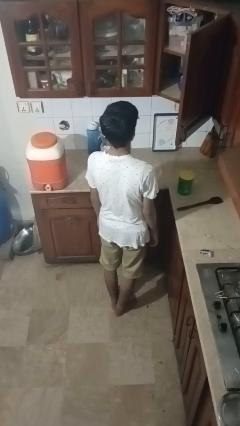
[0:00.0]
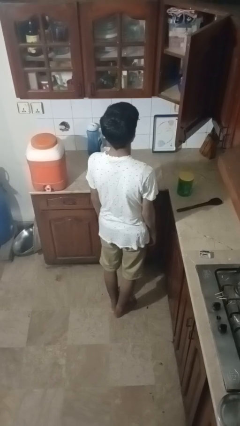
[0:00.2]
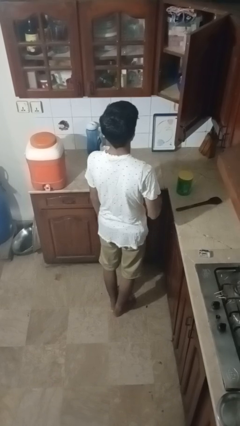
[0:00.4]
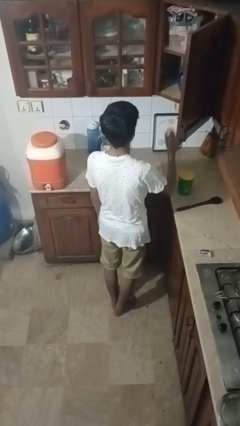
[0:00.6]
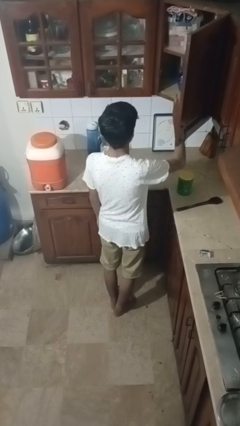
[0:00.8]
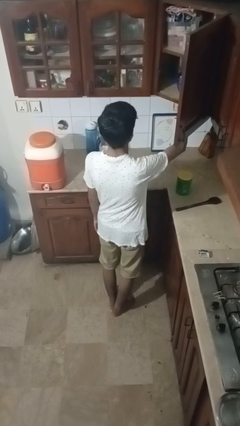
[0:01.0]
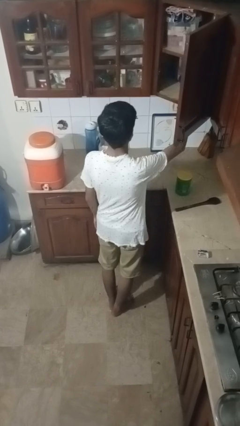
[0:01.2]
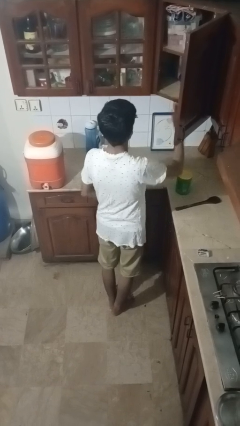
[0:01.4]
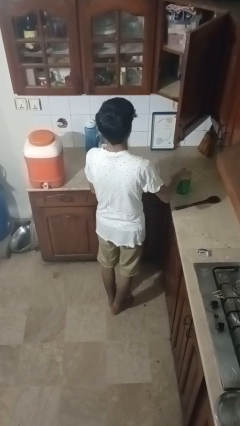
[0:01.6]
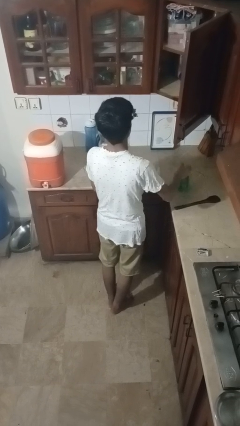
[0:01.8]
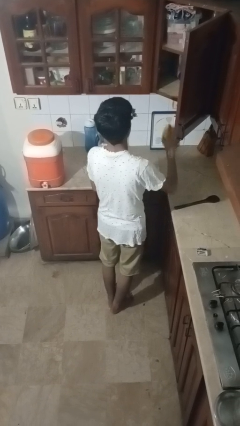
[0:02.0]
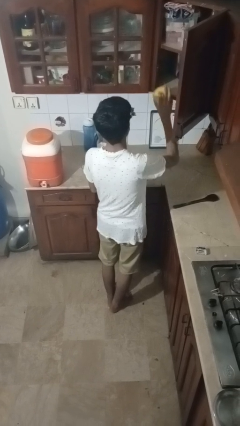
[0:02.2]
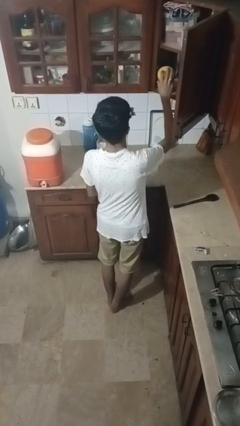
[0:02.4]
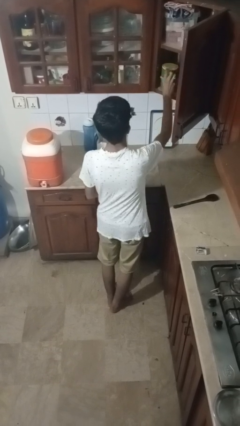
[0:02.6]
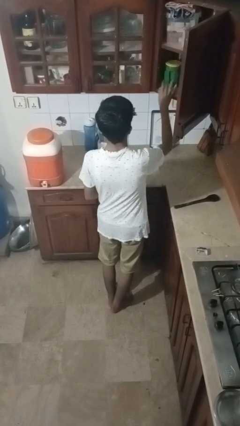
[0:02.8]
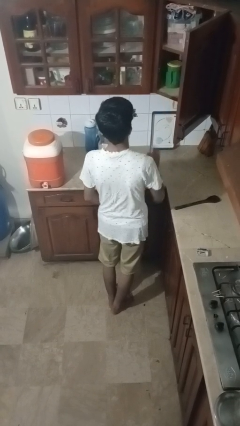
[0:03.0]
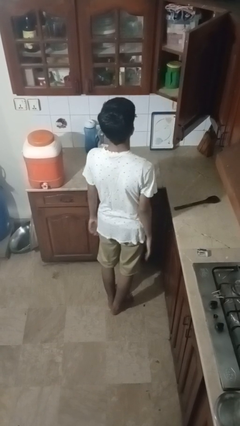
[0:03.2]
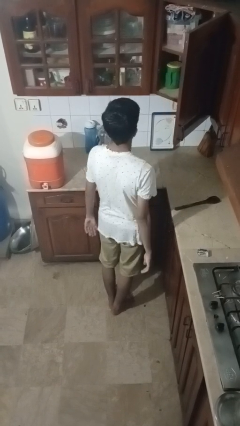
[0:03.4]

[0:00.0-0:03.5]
person puts object in cabinet

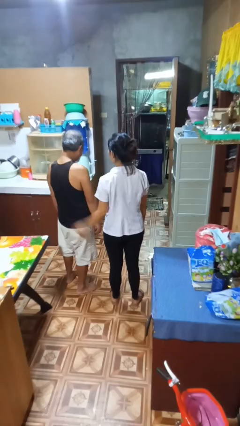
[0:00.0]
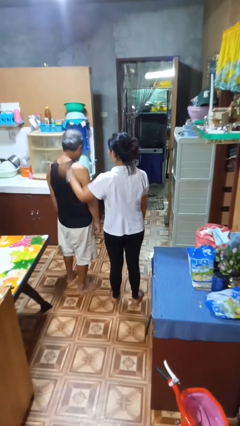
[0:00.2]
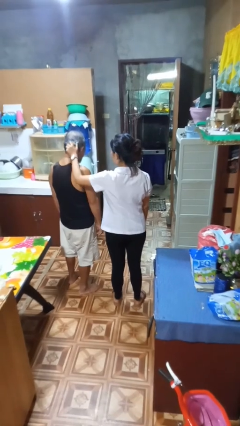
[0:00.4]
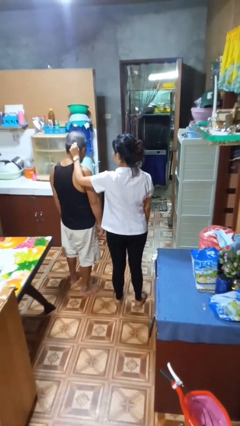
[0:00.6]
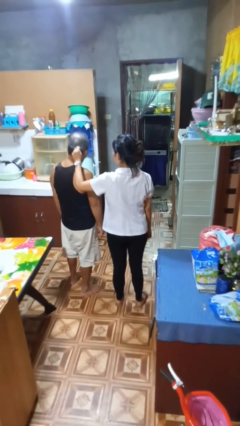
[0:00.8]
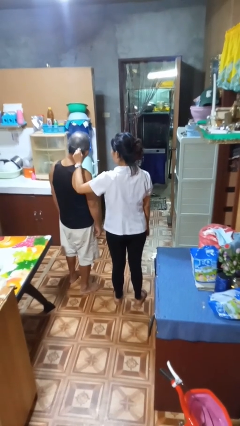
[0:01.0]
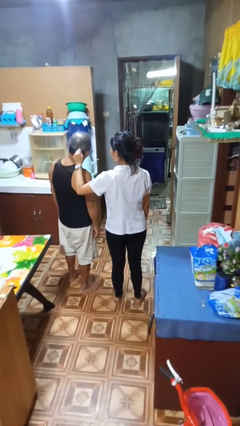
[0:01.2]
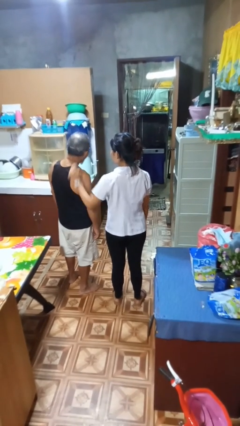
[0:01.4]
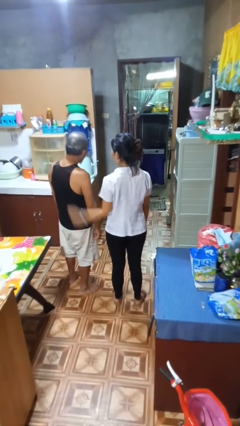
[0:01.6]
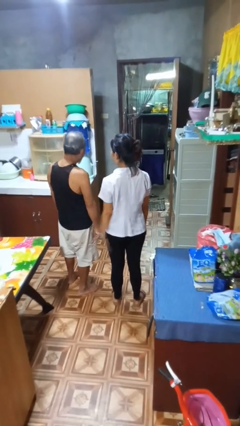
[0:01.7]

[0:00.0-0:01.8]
person grabs person by hair

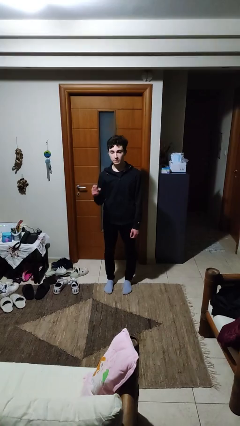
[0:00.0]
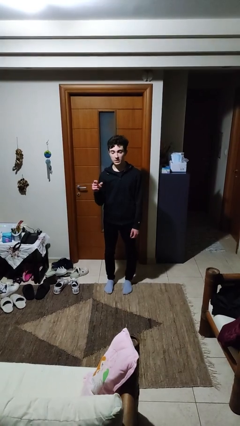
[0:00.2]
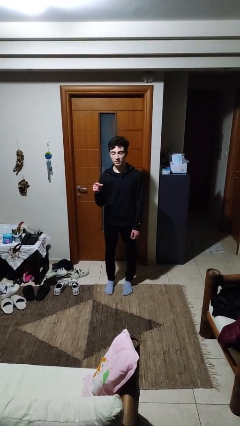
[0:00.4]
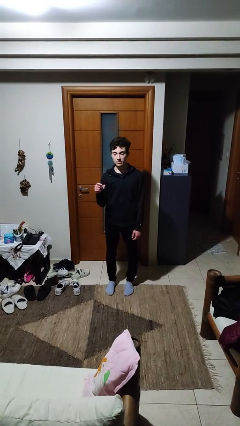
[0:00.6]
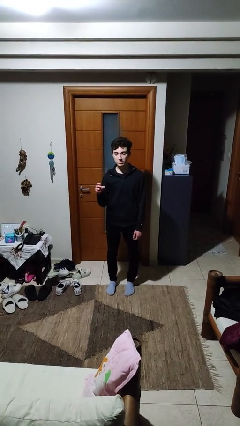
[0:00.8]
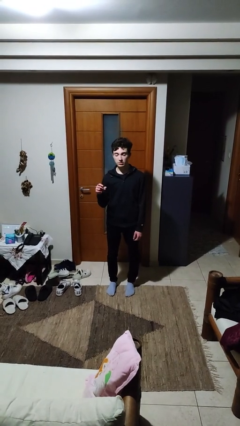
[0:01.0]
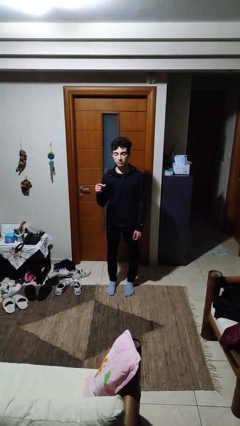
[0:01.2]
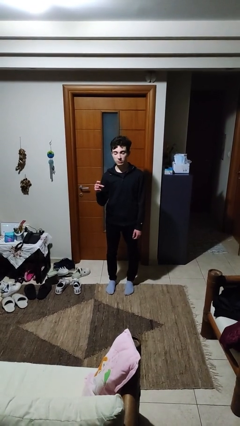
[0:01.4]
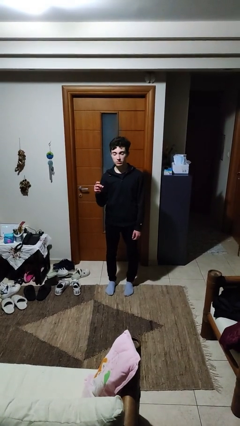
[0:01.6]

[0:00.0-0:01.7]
person snaps fingers

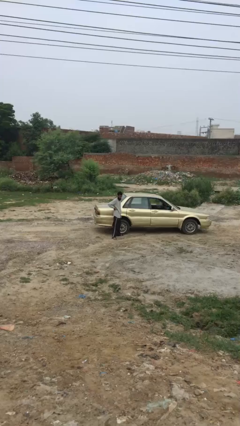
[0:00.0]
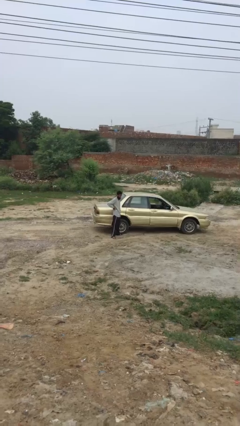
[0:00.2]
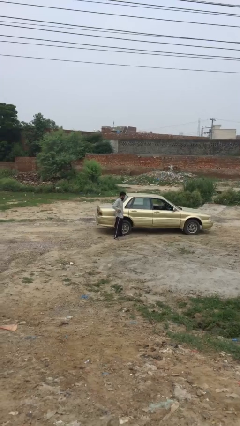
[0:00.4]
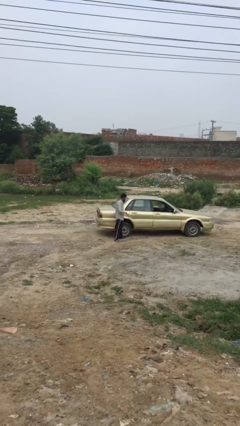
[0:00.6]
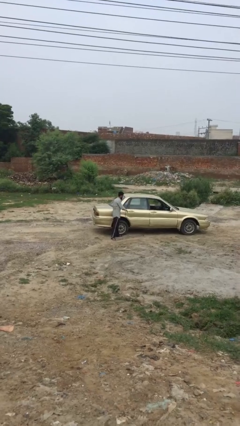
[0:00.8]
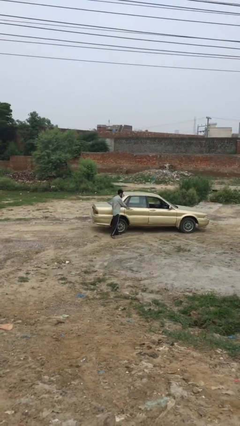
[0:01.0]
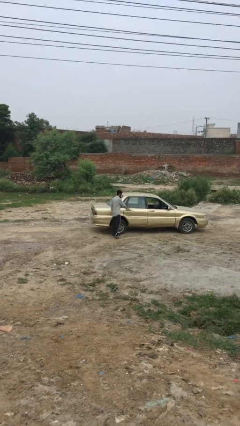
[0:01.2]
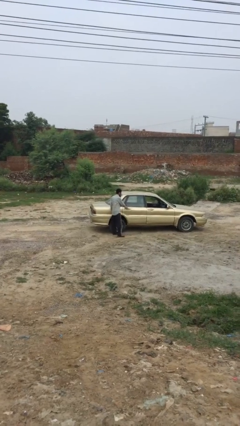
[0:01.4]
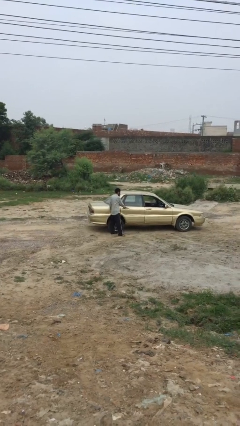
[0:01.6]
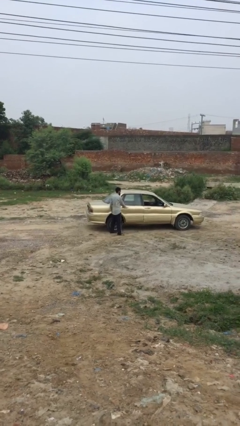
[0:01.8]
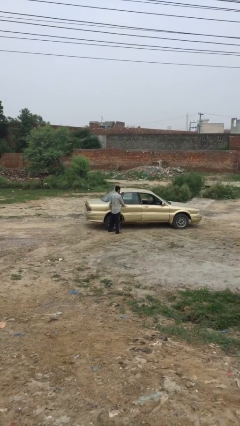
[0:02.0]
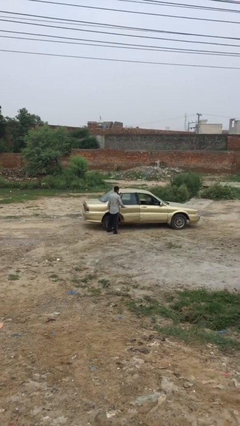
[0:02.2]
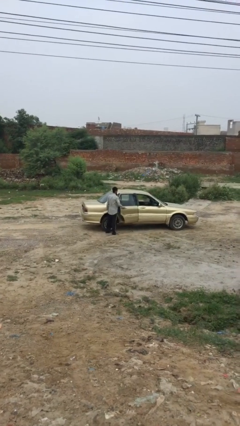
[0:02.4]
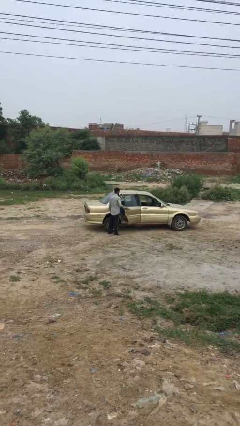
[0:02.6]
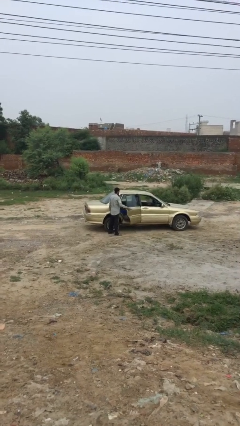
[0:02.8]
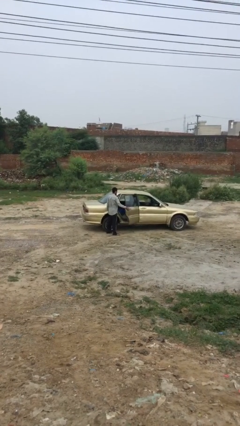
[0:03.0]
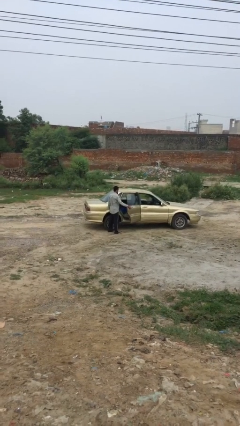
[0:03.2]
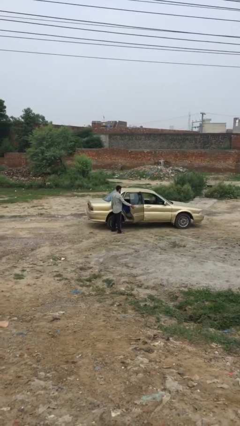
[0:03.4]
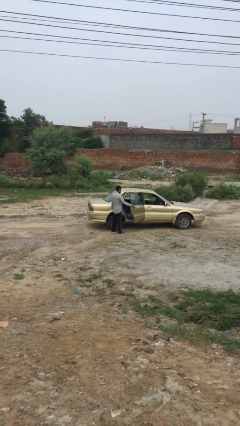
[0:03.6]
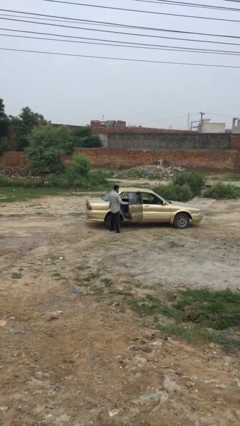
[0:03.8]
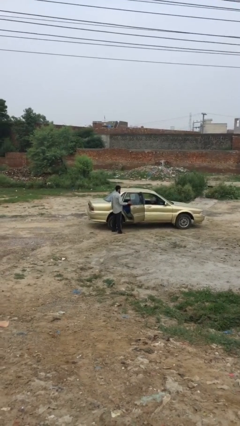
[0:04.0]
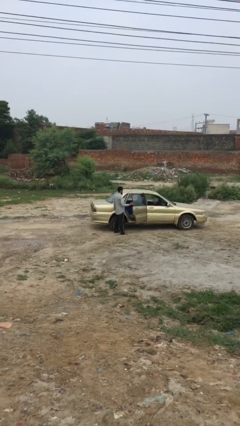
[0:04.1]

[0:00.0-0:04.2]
person opens car door

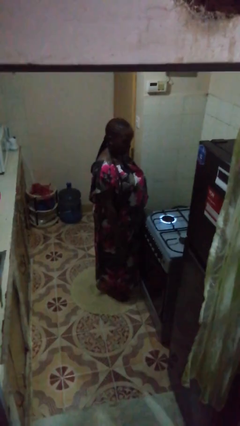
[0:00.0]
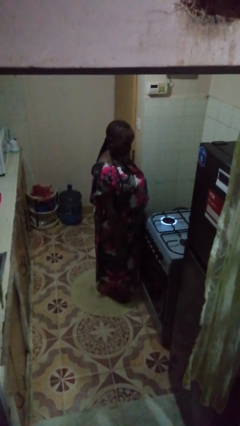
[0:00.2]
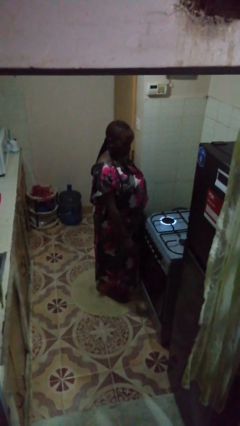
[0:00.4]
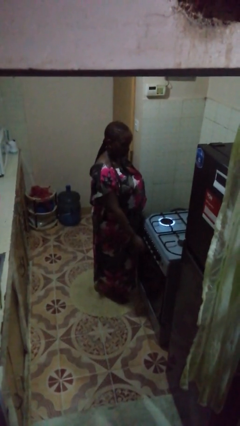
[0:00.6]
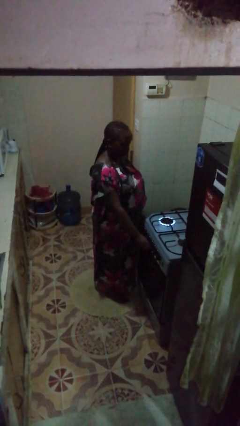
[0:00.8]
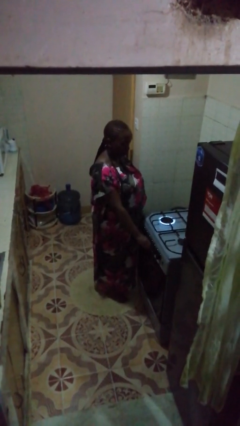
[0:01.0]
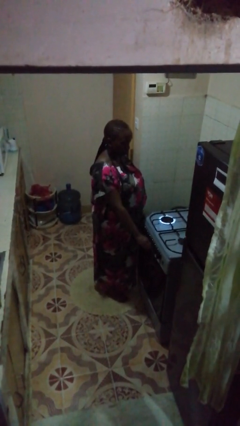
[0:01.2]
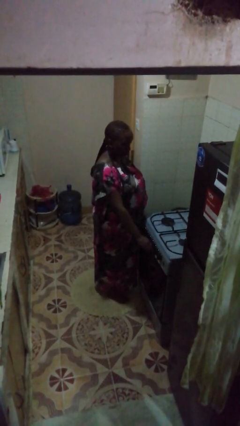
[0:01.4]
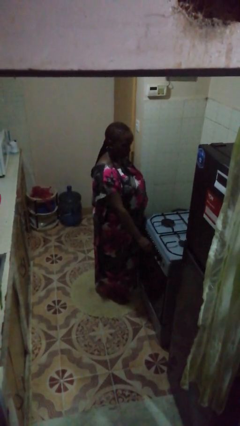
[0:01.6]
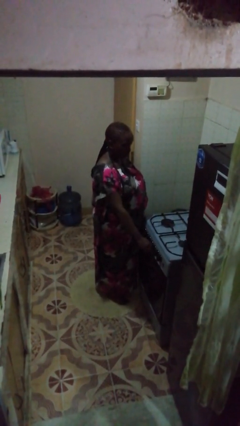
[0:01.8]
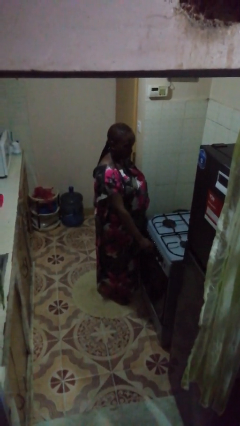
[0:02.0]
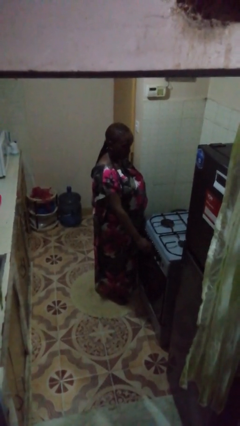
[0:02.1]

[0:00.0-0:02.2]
person turns off stovetop

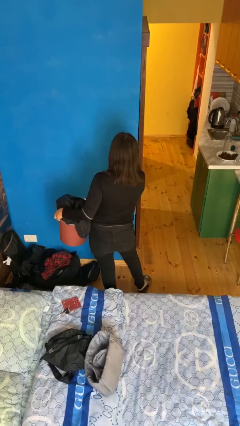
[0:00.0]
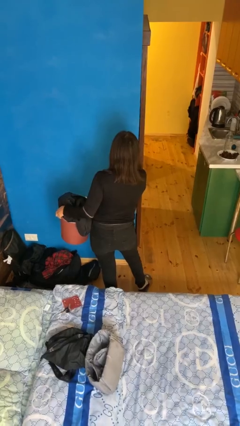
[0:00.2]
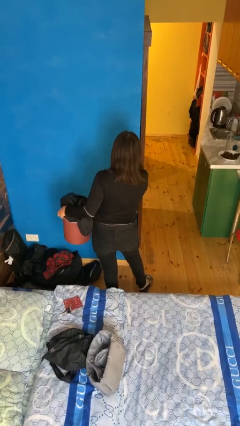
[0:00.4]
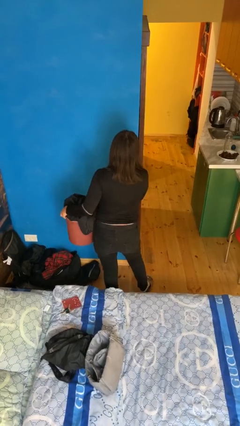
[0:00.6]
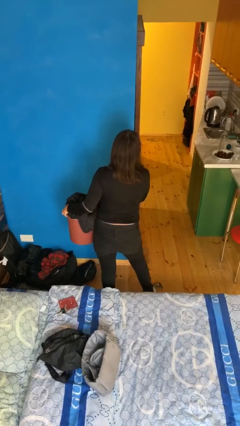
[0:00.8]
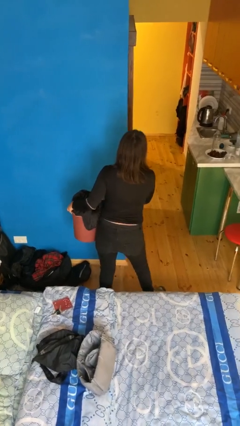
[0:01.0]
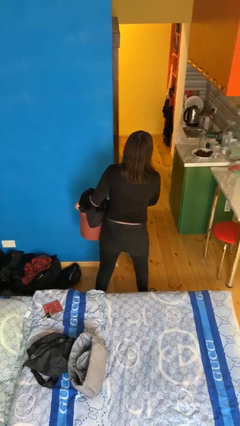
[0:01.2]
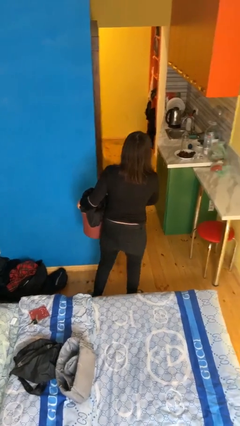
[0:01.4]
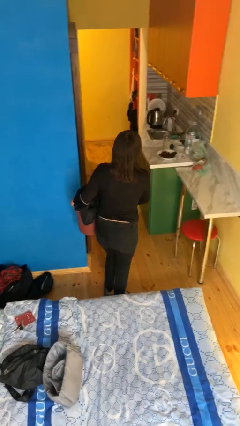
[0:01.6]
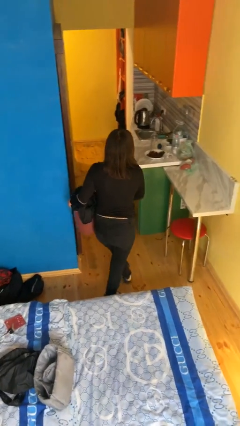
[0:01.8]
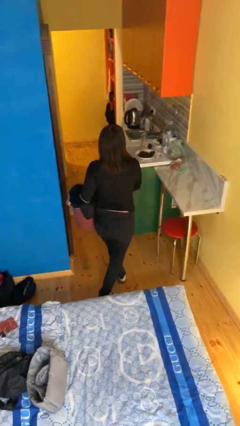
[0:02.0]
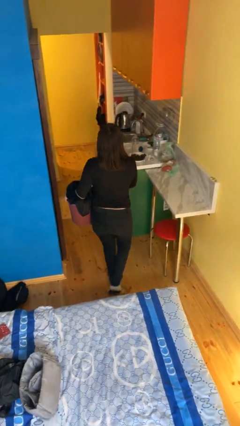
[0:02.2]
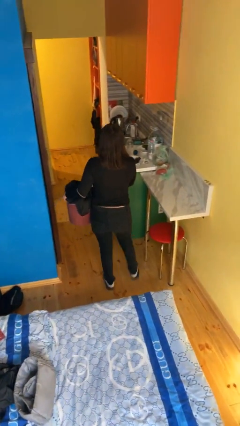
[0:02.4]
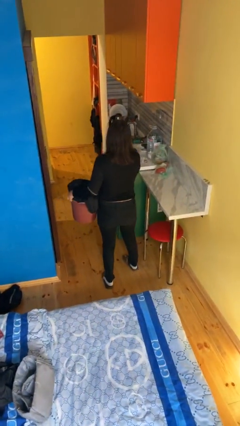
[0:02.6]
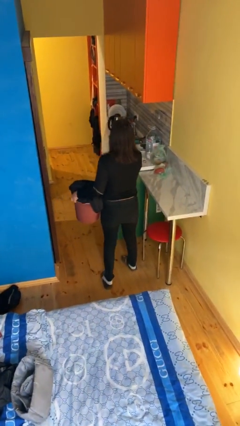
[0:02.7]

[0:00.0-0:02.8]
person carries laundry basket

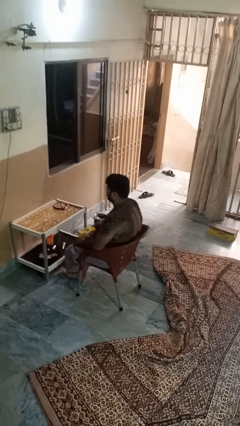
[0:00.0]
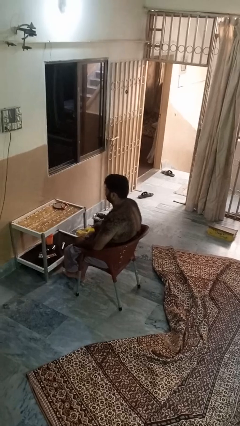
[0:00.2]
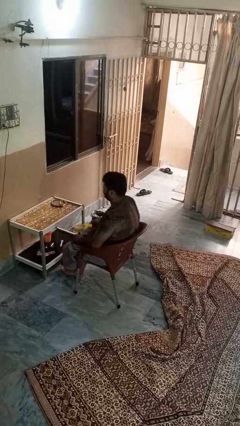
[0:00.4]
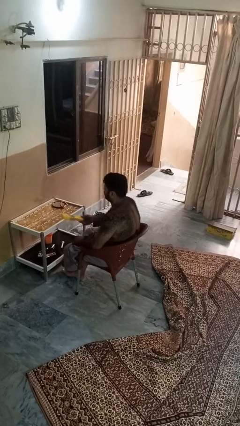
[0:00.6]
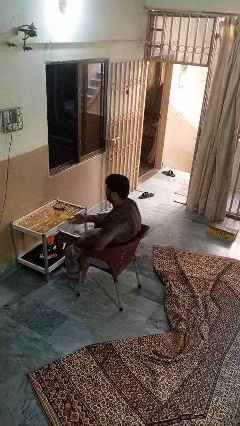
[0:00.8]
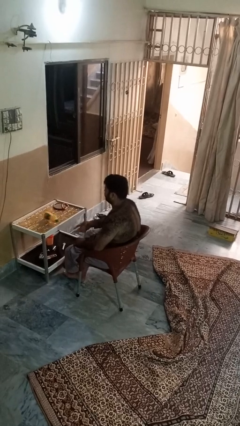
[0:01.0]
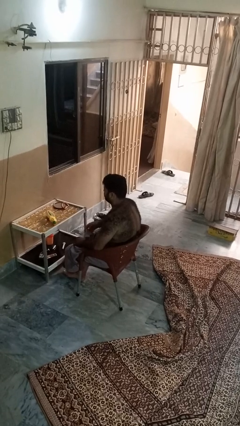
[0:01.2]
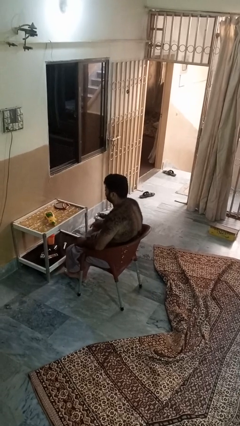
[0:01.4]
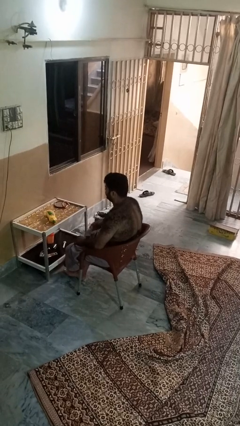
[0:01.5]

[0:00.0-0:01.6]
person throws object on table
